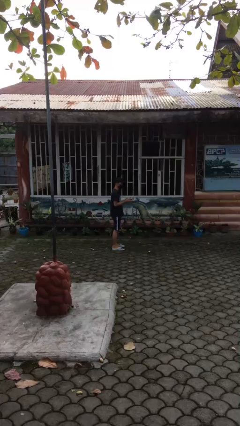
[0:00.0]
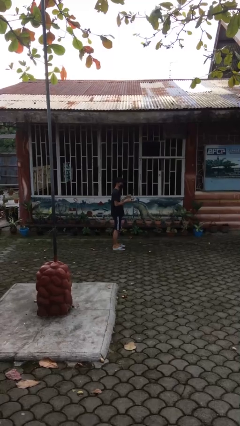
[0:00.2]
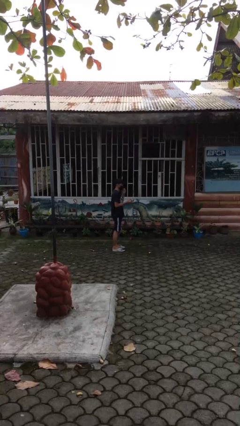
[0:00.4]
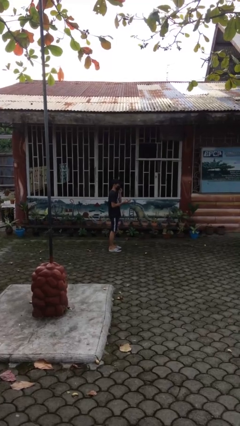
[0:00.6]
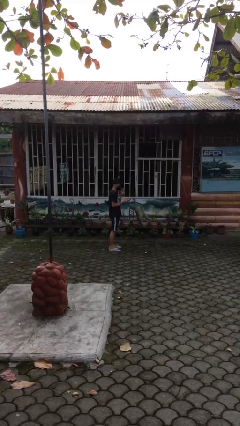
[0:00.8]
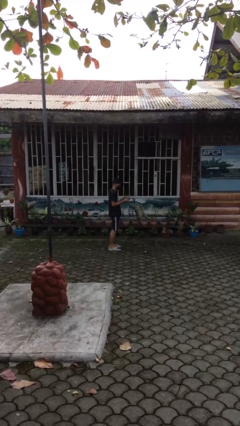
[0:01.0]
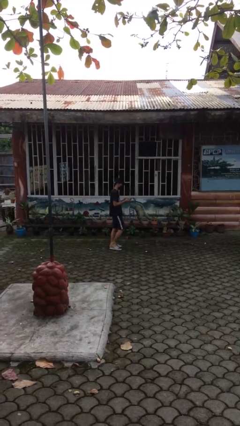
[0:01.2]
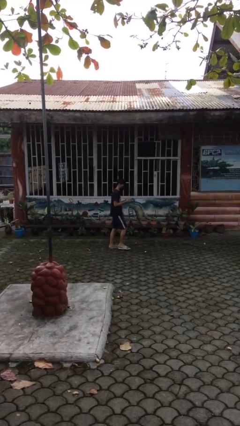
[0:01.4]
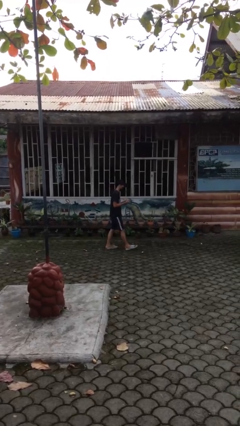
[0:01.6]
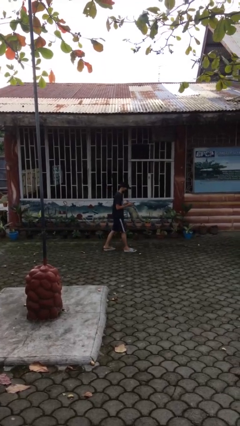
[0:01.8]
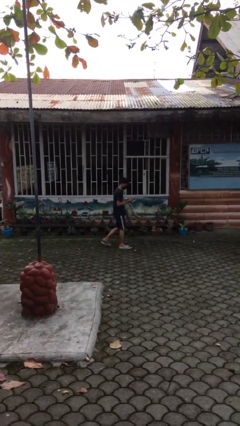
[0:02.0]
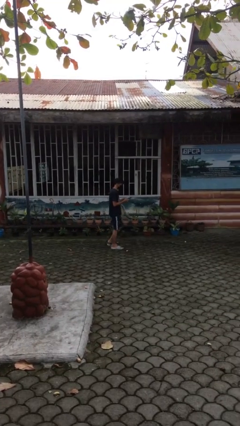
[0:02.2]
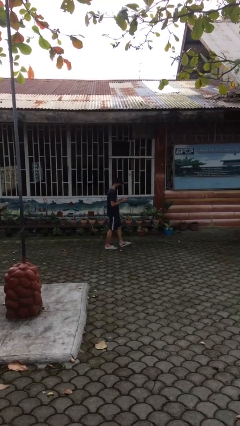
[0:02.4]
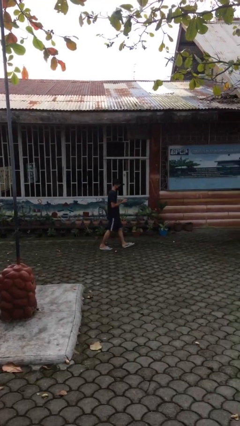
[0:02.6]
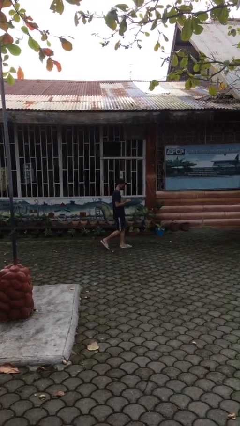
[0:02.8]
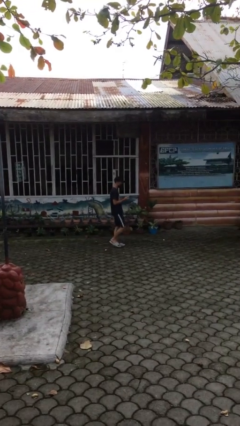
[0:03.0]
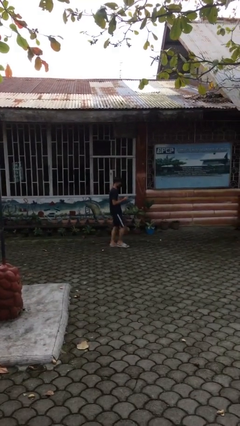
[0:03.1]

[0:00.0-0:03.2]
person texts on phone

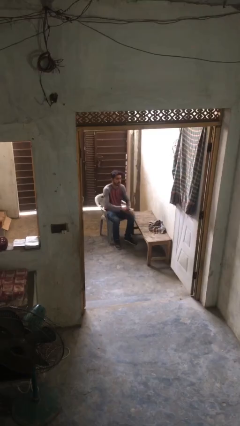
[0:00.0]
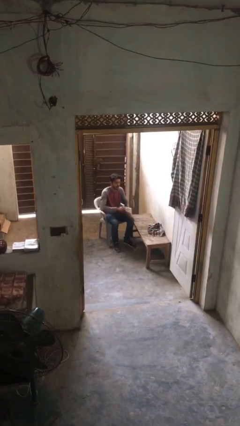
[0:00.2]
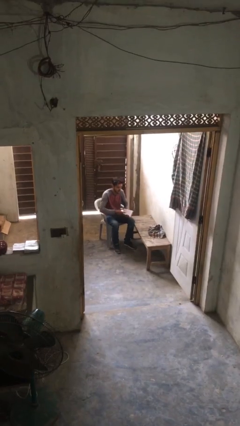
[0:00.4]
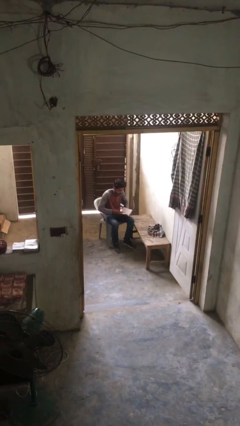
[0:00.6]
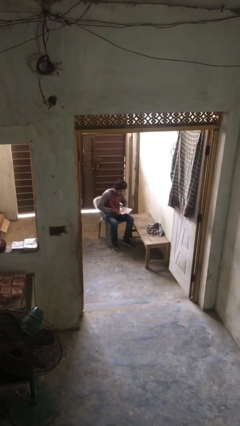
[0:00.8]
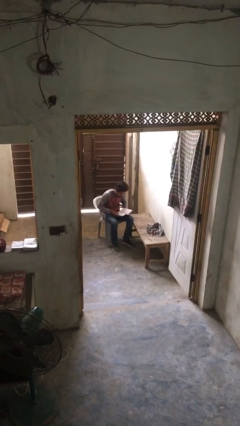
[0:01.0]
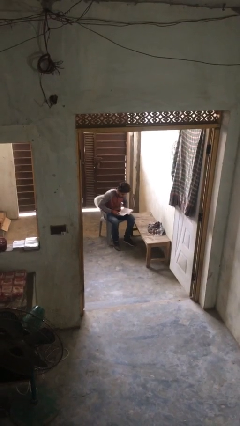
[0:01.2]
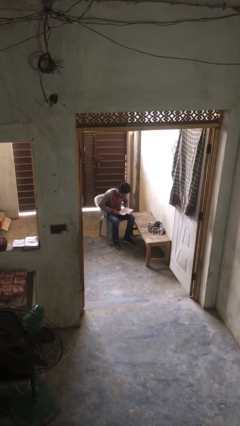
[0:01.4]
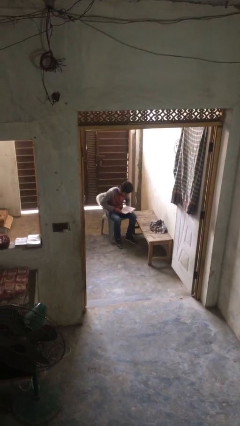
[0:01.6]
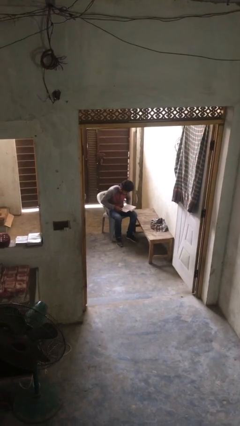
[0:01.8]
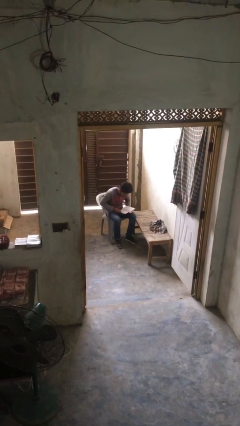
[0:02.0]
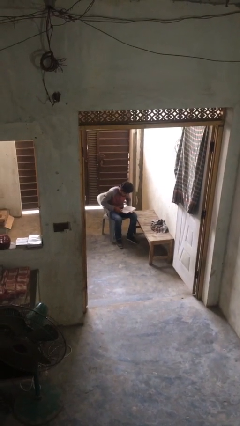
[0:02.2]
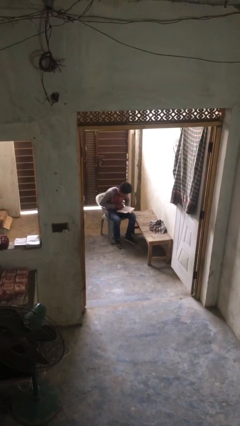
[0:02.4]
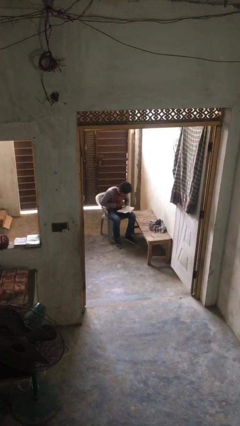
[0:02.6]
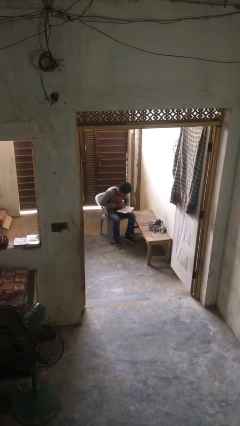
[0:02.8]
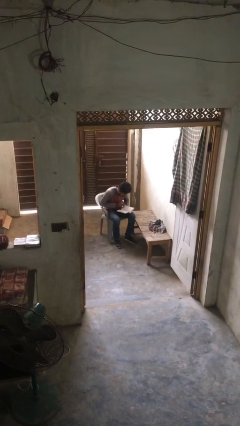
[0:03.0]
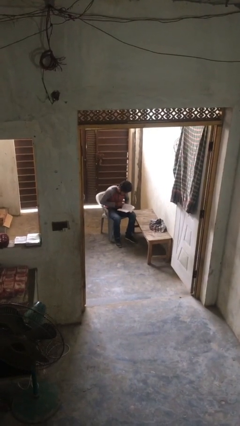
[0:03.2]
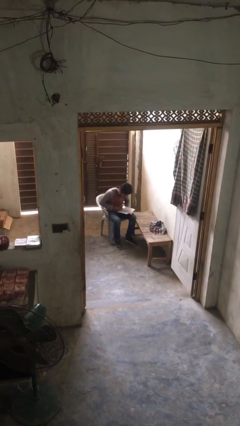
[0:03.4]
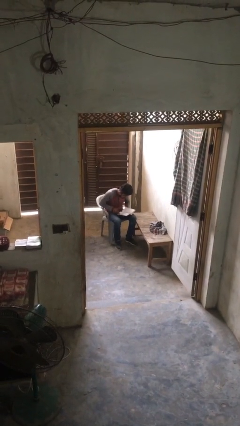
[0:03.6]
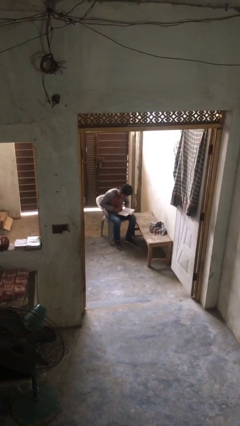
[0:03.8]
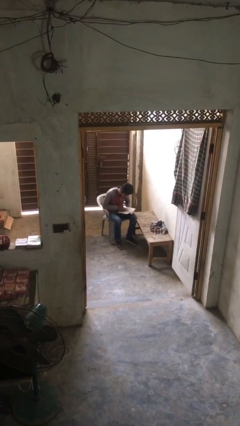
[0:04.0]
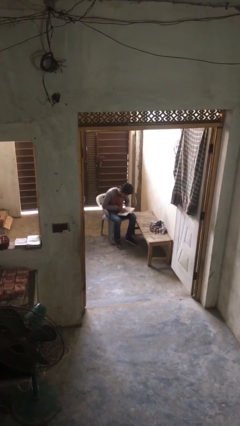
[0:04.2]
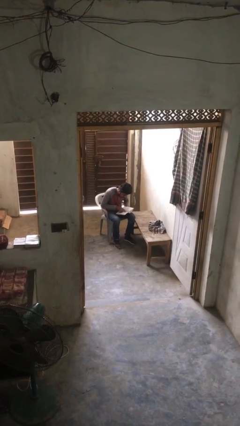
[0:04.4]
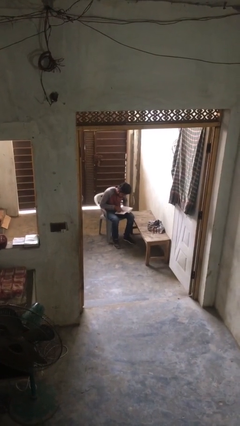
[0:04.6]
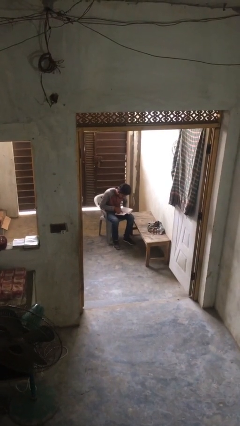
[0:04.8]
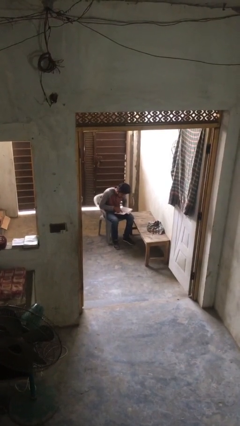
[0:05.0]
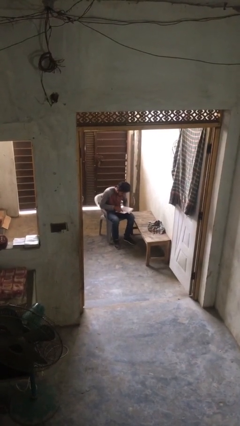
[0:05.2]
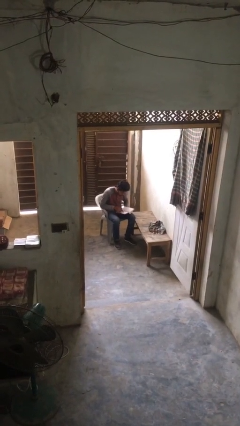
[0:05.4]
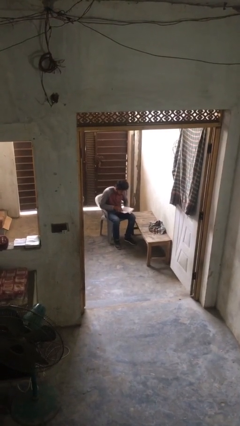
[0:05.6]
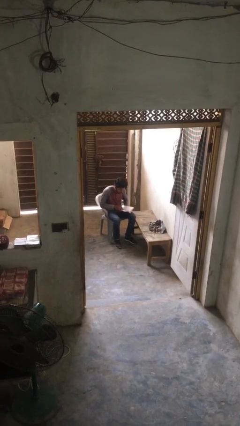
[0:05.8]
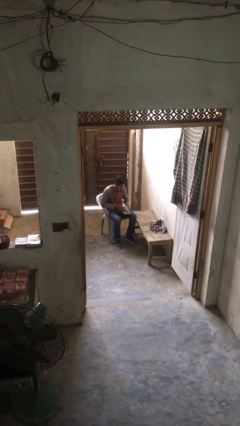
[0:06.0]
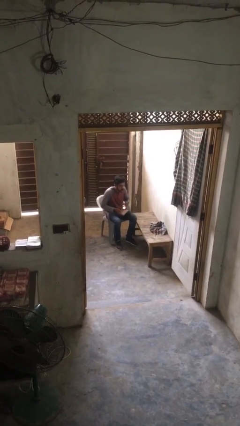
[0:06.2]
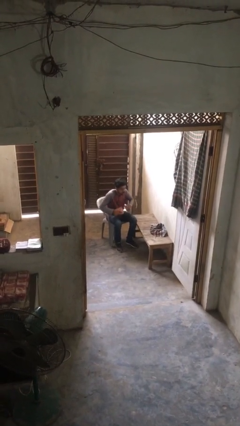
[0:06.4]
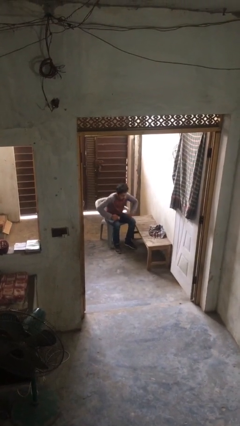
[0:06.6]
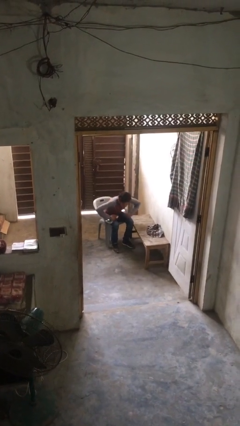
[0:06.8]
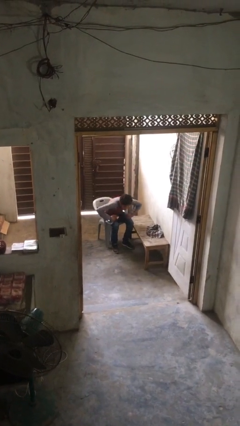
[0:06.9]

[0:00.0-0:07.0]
person reads document

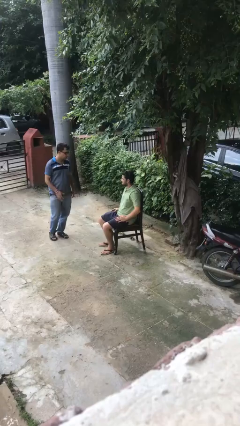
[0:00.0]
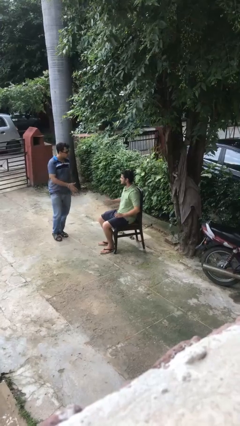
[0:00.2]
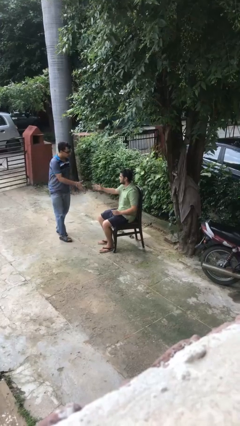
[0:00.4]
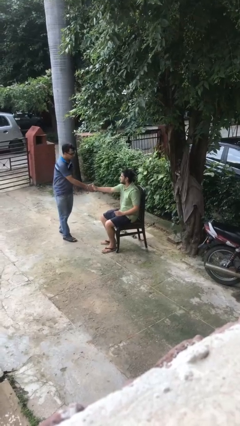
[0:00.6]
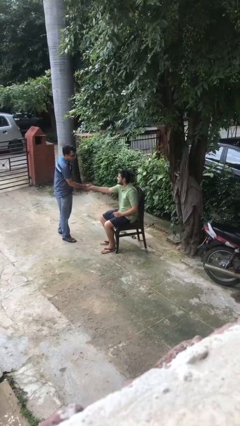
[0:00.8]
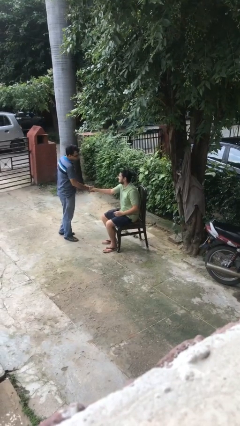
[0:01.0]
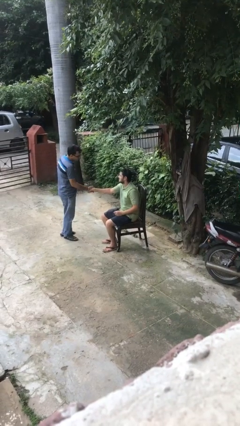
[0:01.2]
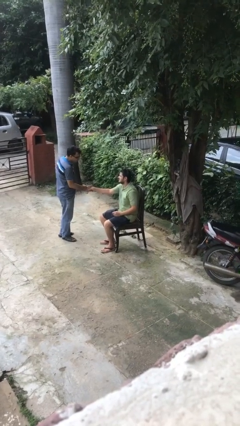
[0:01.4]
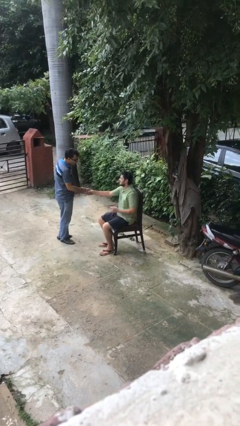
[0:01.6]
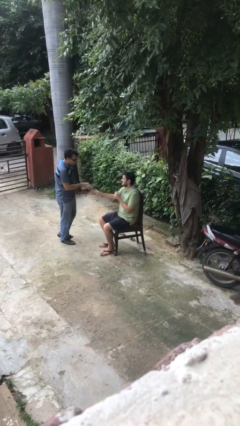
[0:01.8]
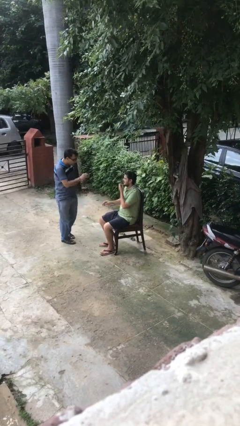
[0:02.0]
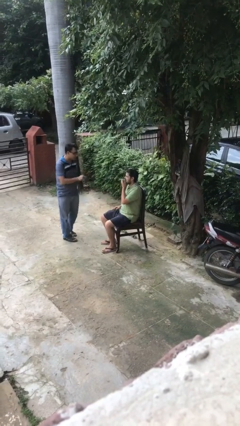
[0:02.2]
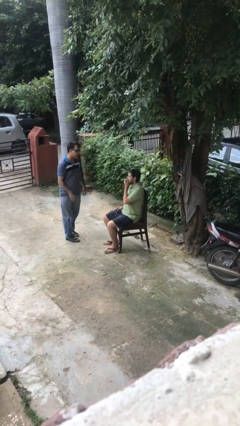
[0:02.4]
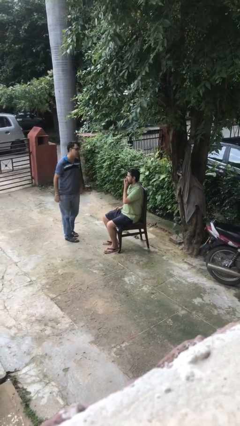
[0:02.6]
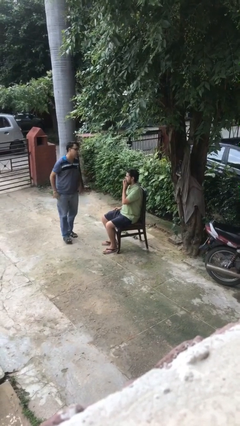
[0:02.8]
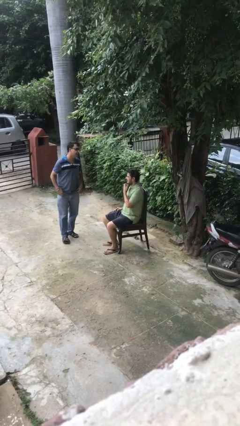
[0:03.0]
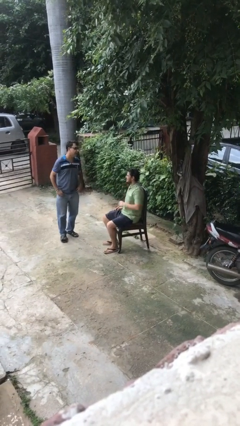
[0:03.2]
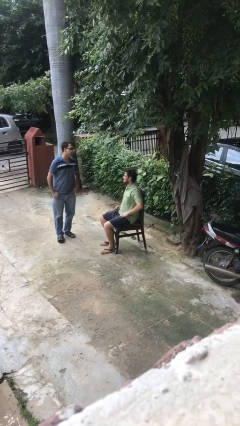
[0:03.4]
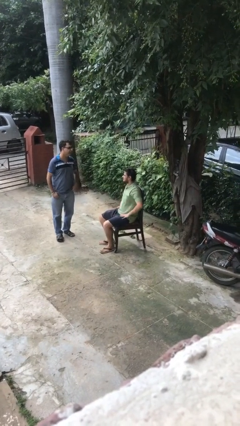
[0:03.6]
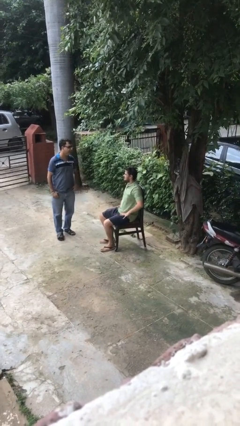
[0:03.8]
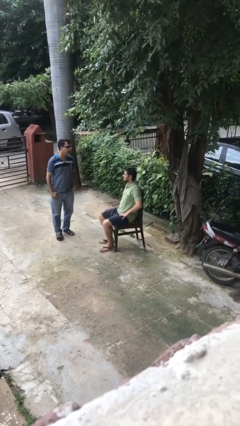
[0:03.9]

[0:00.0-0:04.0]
person shakes hand

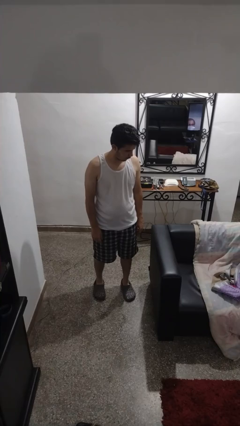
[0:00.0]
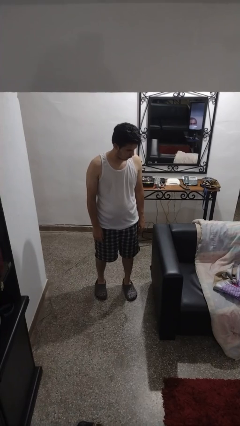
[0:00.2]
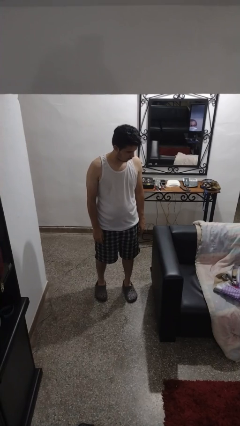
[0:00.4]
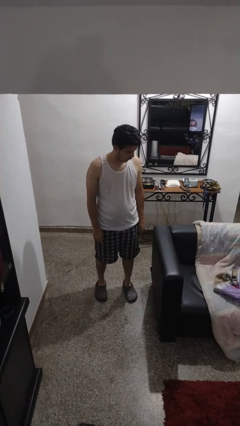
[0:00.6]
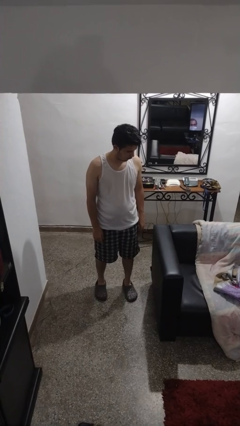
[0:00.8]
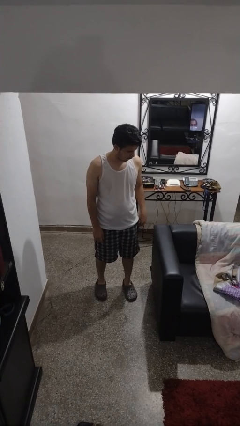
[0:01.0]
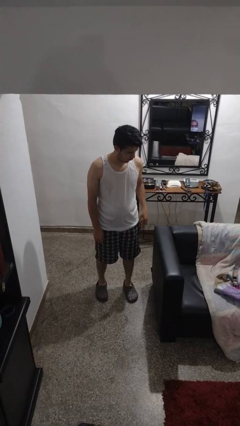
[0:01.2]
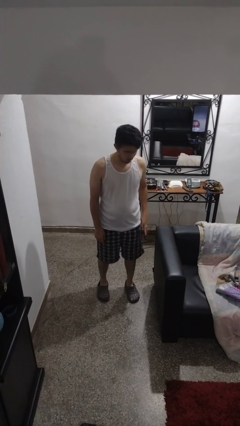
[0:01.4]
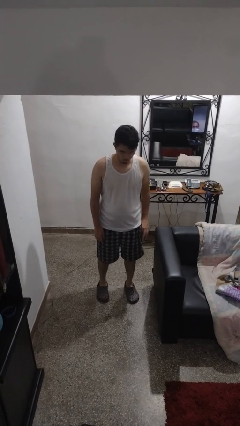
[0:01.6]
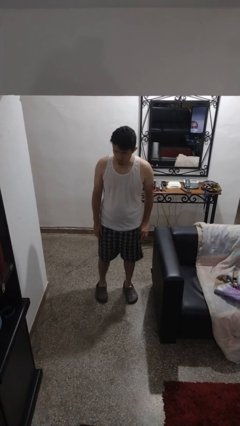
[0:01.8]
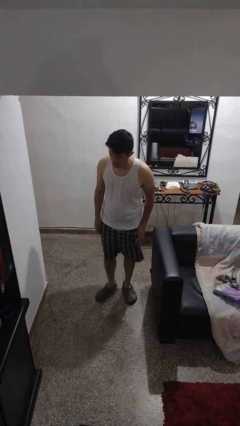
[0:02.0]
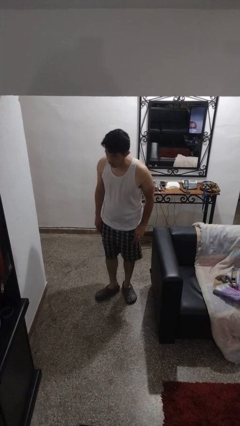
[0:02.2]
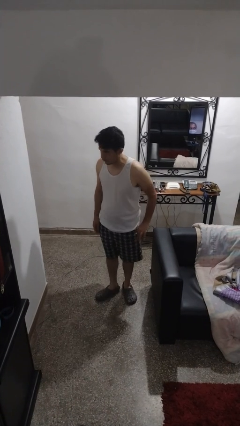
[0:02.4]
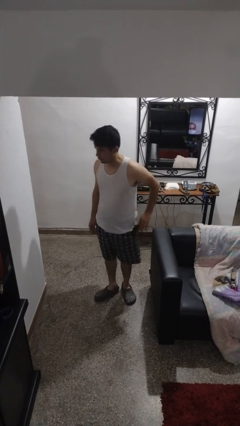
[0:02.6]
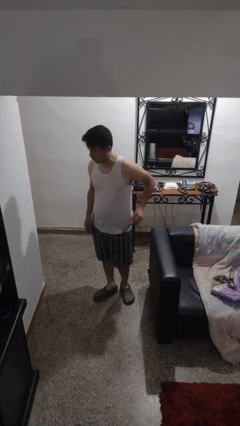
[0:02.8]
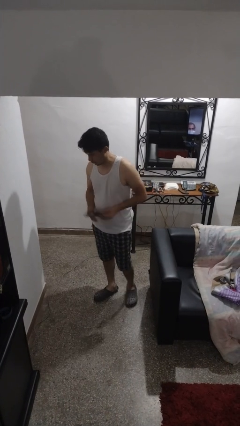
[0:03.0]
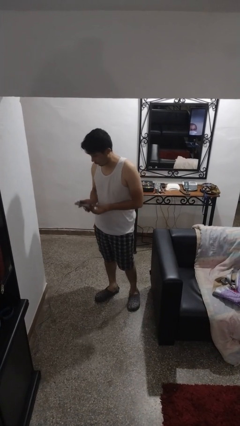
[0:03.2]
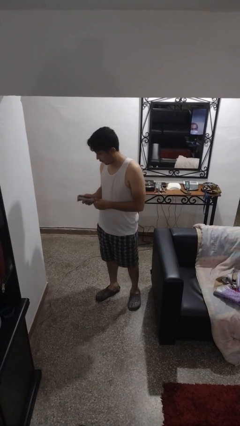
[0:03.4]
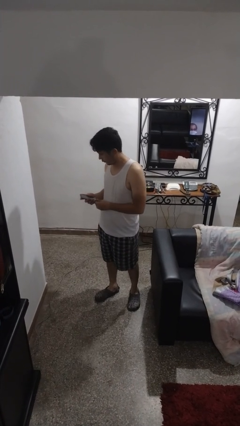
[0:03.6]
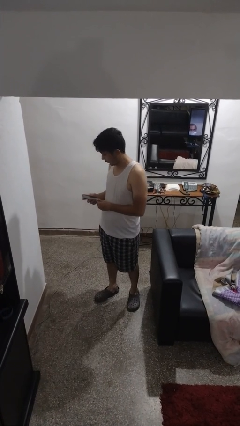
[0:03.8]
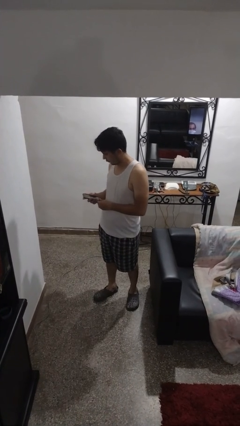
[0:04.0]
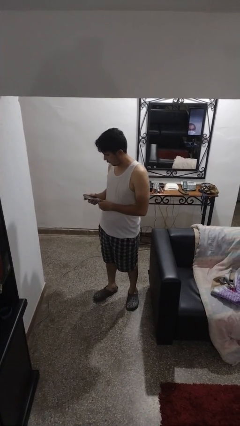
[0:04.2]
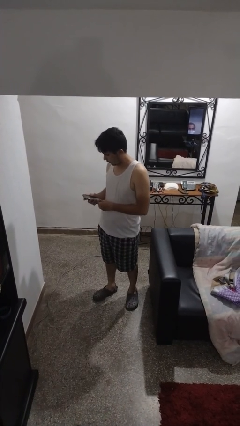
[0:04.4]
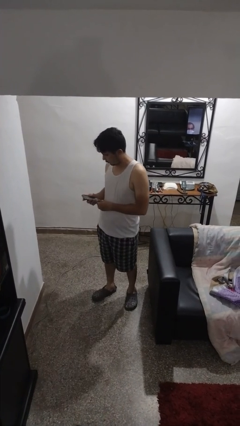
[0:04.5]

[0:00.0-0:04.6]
person takes phone from pocket
